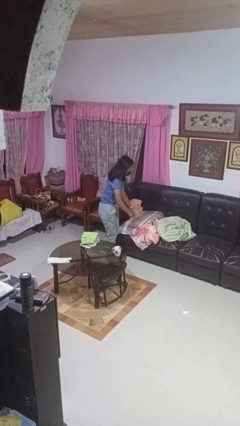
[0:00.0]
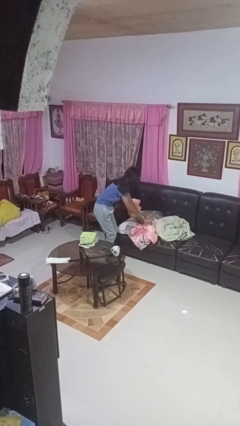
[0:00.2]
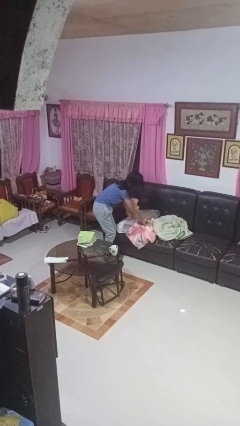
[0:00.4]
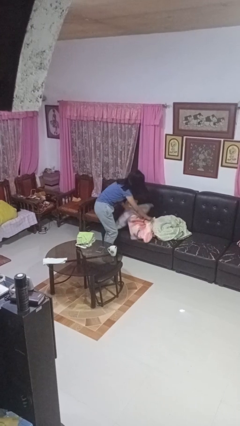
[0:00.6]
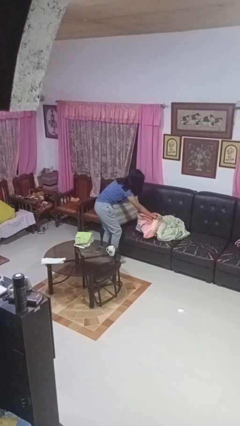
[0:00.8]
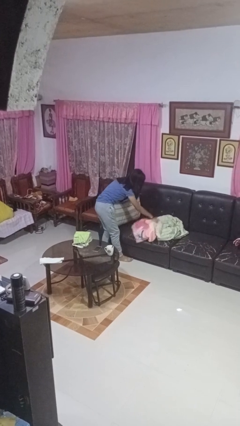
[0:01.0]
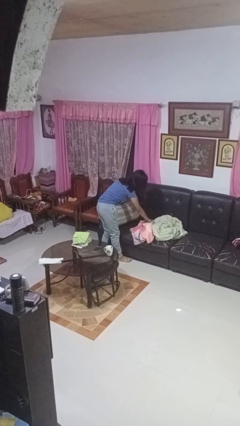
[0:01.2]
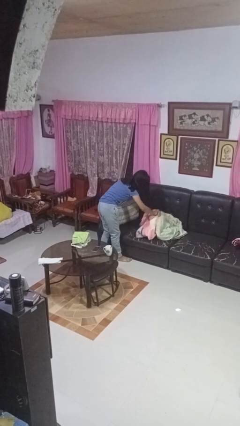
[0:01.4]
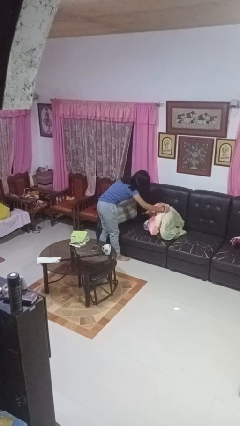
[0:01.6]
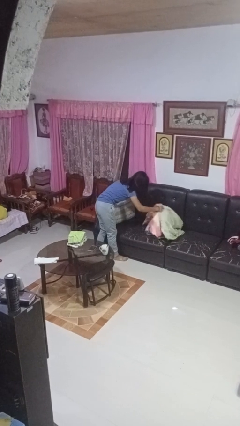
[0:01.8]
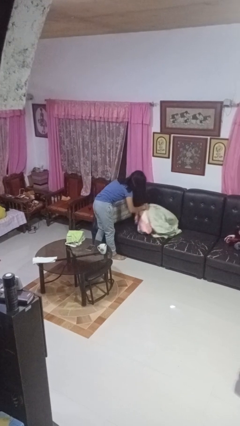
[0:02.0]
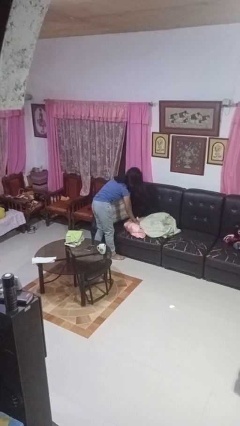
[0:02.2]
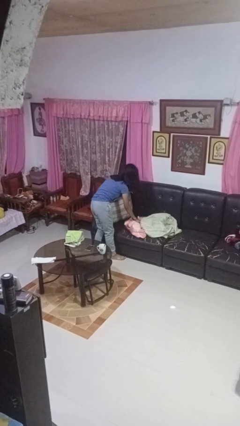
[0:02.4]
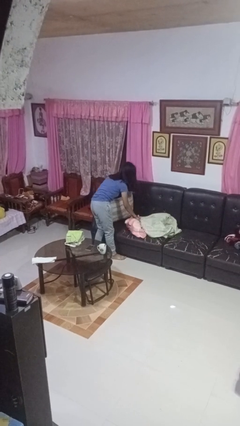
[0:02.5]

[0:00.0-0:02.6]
person searches in couch

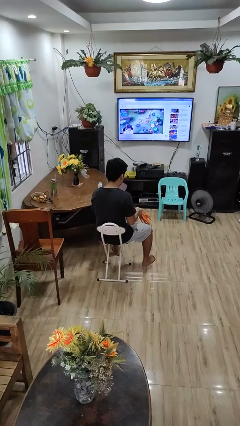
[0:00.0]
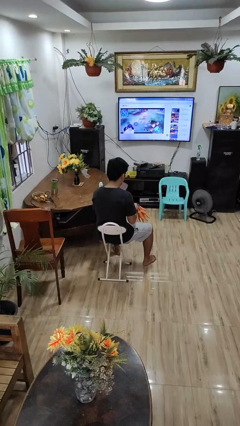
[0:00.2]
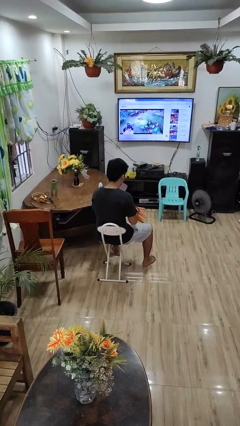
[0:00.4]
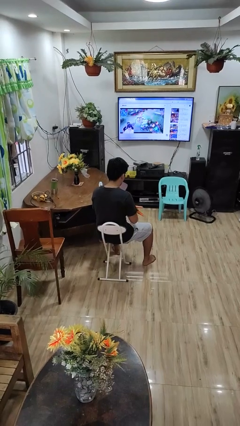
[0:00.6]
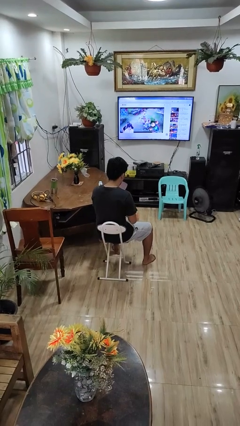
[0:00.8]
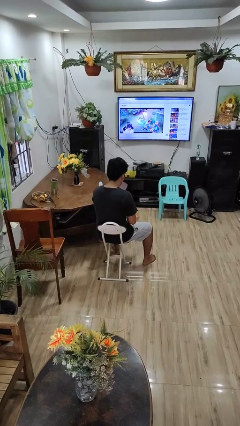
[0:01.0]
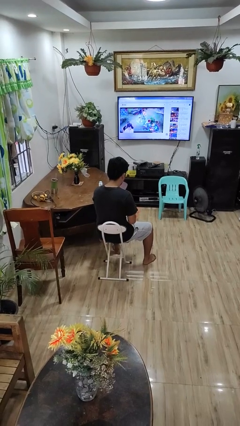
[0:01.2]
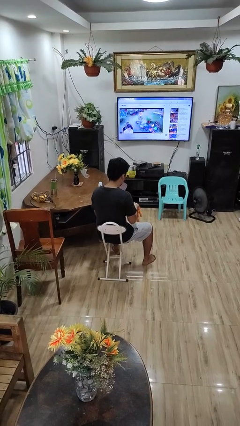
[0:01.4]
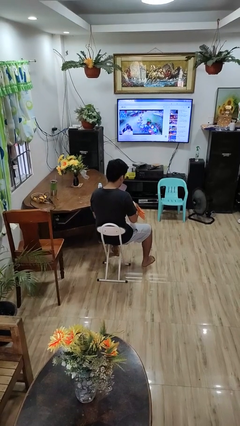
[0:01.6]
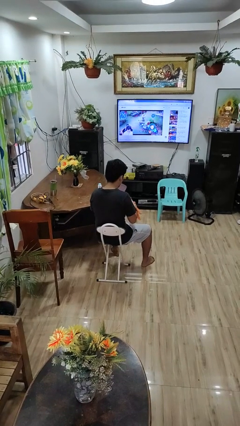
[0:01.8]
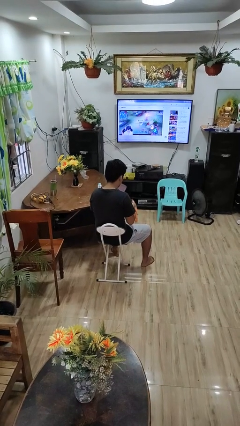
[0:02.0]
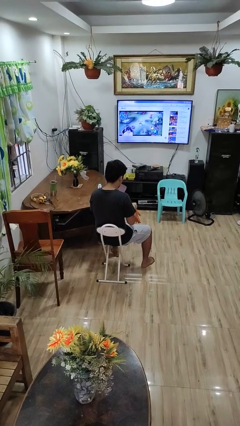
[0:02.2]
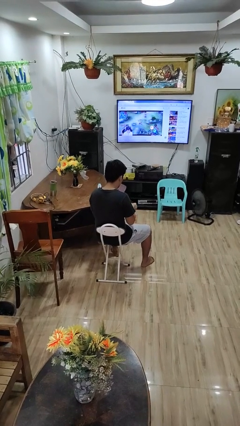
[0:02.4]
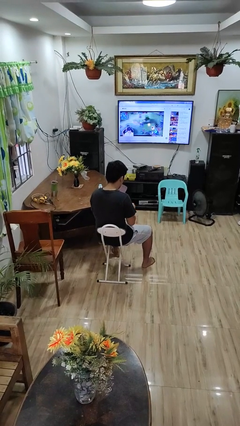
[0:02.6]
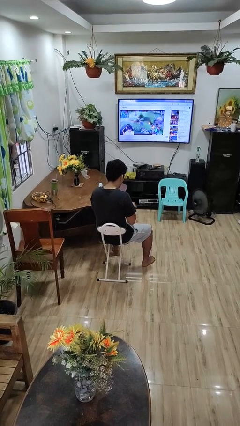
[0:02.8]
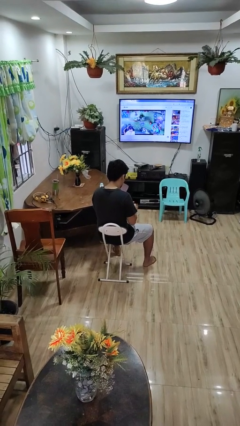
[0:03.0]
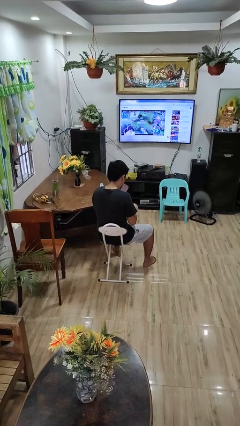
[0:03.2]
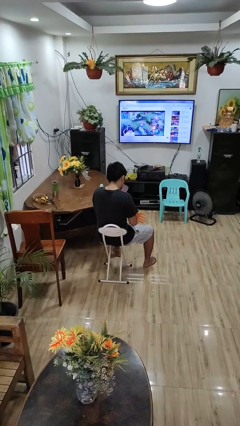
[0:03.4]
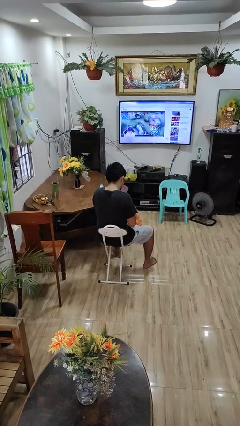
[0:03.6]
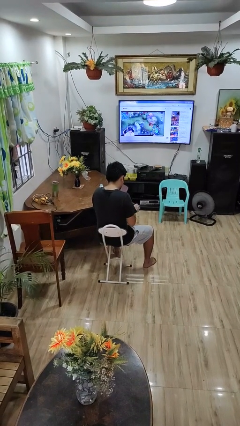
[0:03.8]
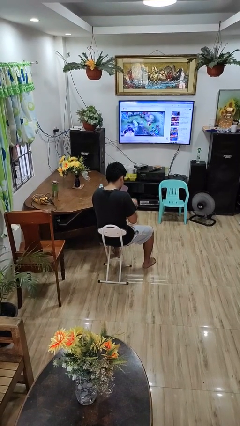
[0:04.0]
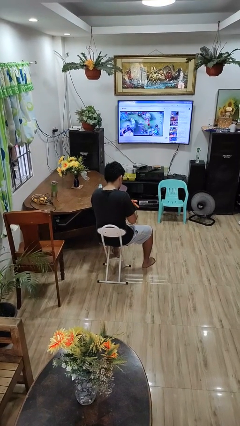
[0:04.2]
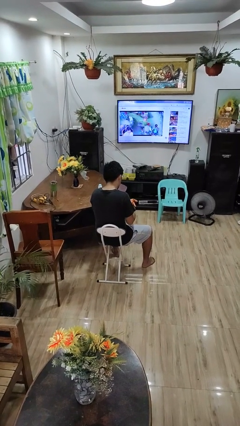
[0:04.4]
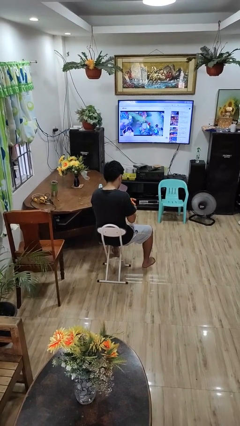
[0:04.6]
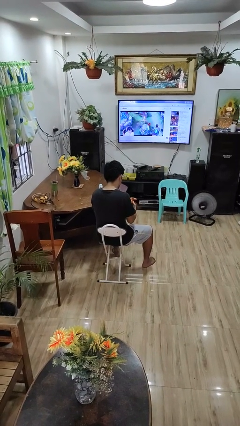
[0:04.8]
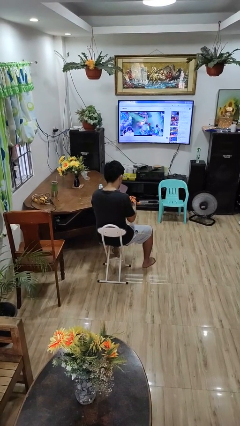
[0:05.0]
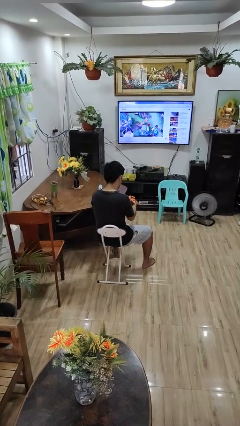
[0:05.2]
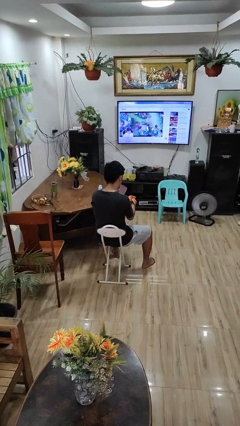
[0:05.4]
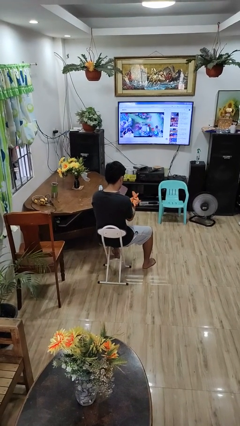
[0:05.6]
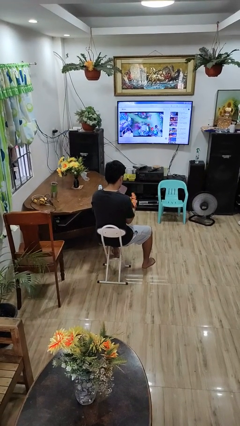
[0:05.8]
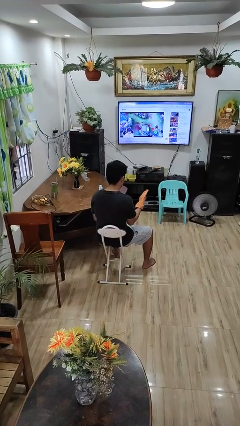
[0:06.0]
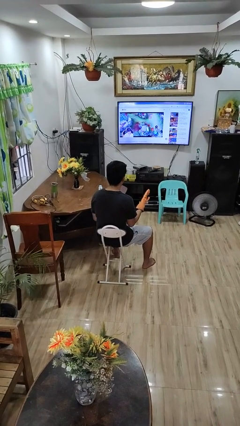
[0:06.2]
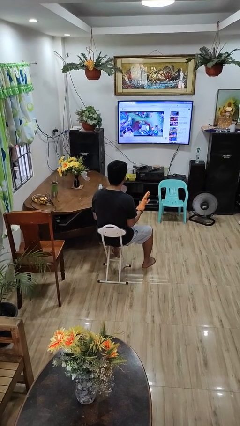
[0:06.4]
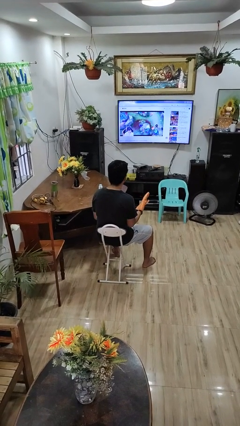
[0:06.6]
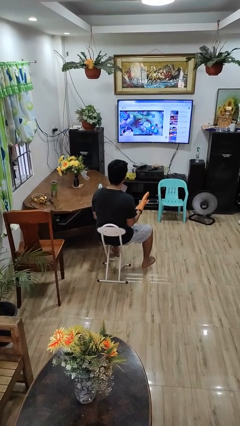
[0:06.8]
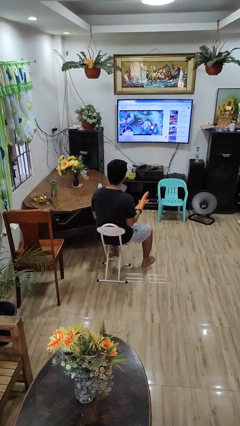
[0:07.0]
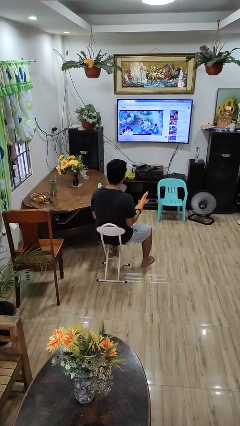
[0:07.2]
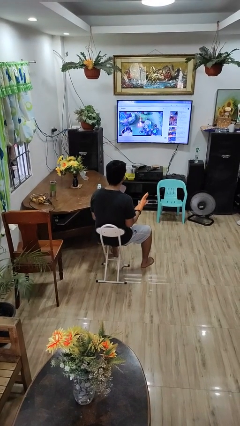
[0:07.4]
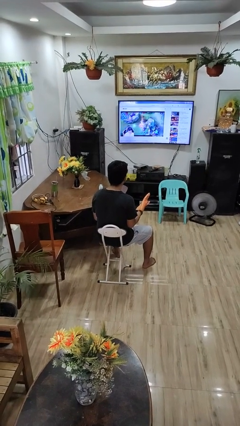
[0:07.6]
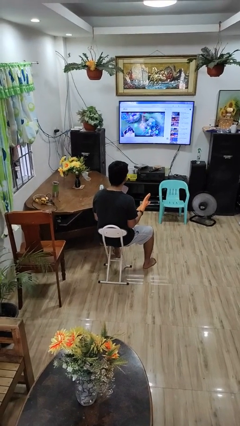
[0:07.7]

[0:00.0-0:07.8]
person puts on gloves

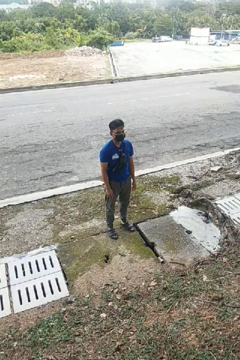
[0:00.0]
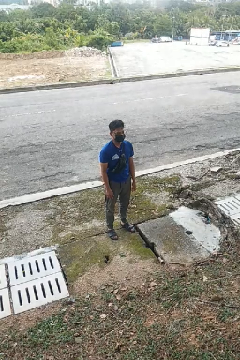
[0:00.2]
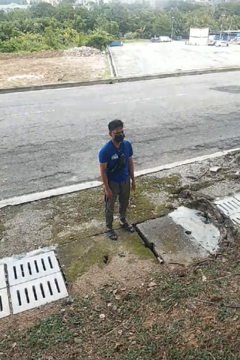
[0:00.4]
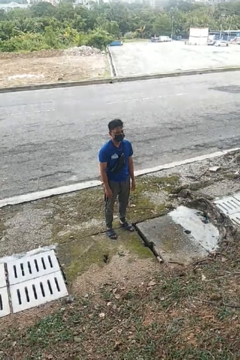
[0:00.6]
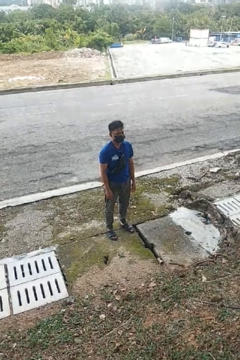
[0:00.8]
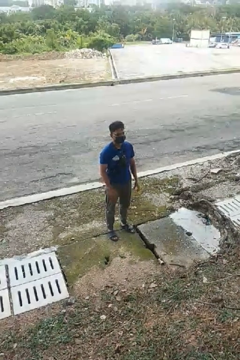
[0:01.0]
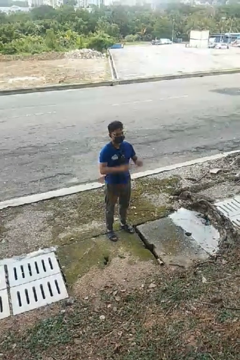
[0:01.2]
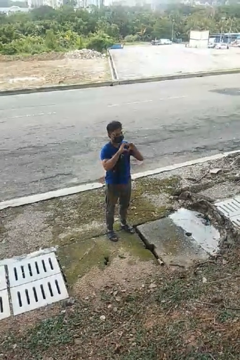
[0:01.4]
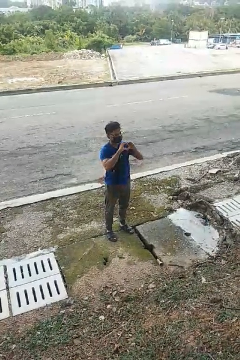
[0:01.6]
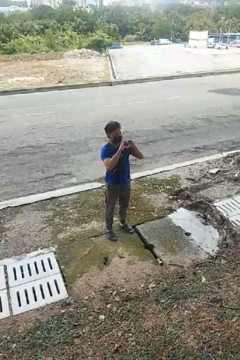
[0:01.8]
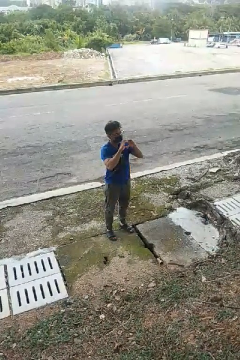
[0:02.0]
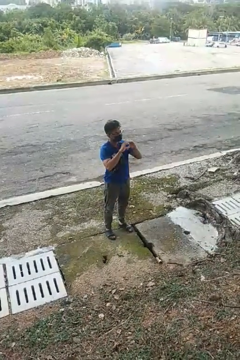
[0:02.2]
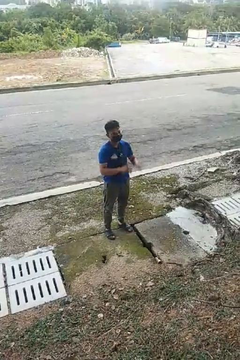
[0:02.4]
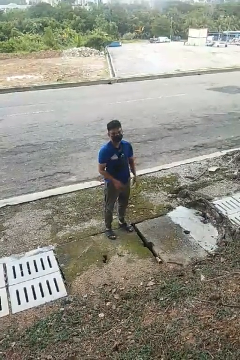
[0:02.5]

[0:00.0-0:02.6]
person gestures heart

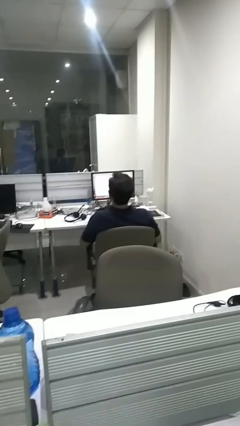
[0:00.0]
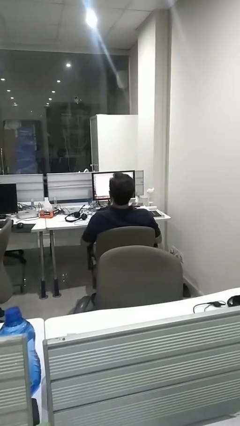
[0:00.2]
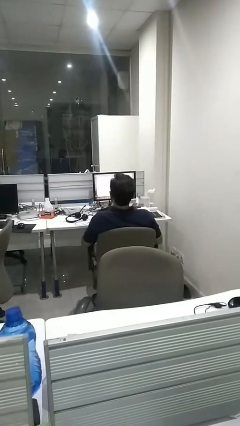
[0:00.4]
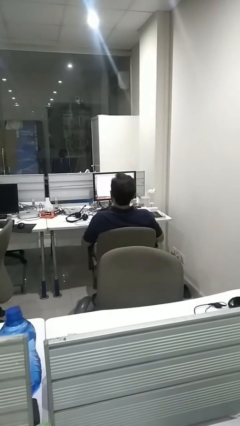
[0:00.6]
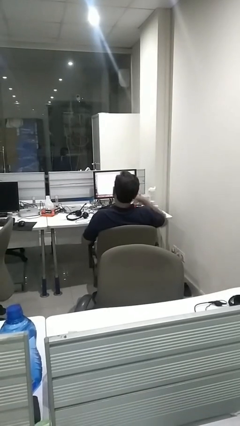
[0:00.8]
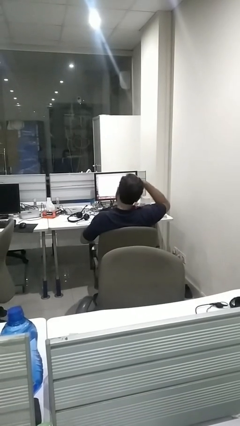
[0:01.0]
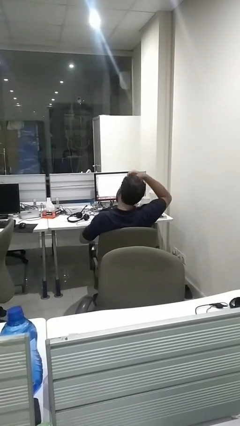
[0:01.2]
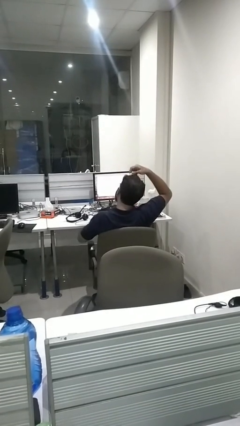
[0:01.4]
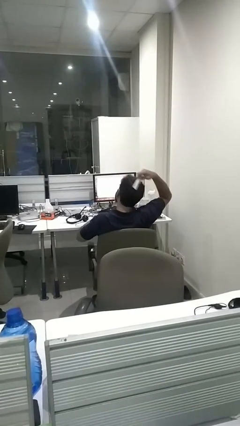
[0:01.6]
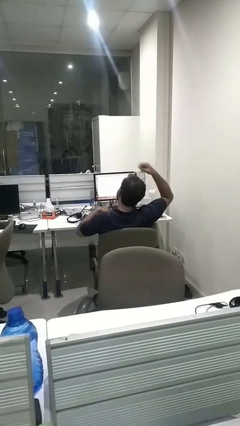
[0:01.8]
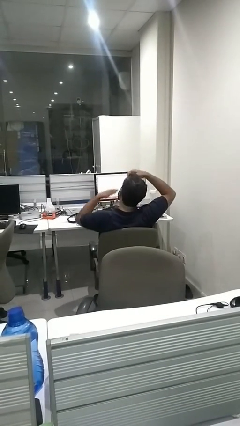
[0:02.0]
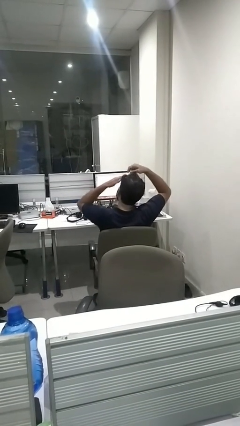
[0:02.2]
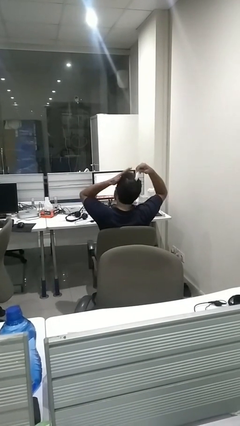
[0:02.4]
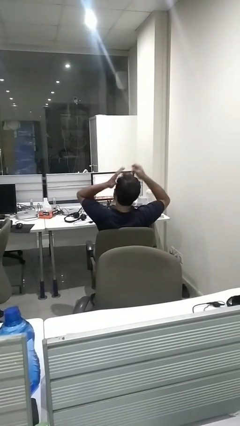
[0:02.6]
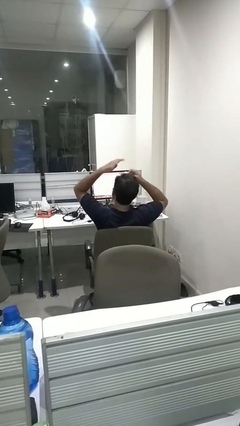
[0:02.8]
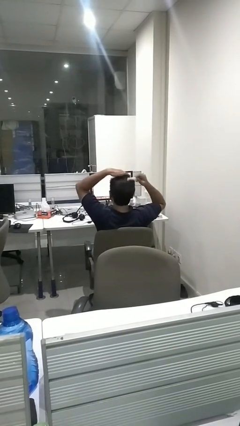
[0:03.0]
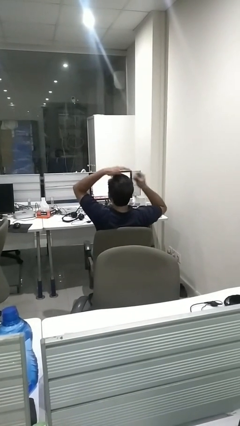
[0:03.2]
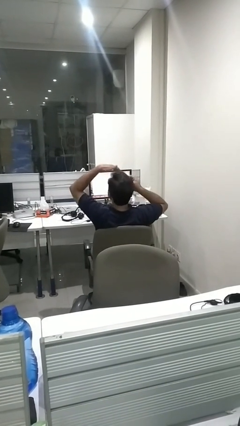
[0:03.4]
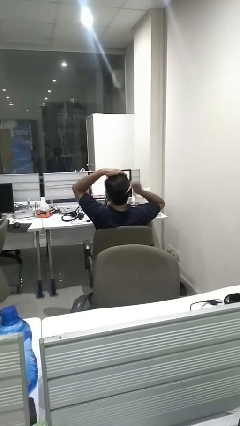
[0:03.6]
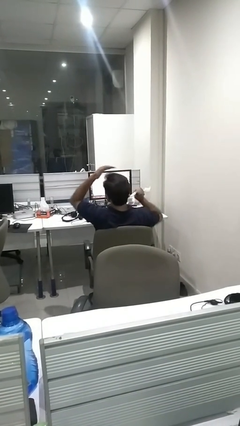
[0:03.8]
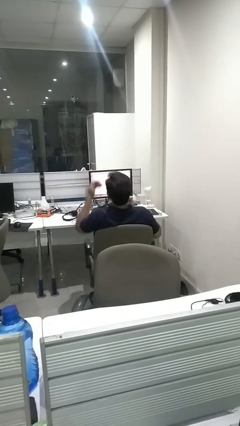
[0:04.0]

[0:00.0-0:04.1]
person brushes hair

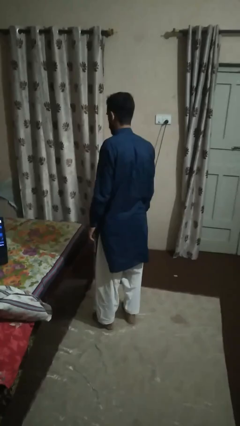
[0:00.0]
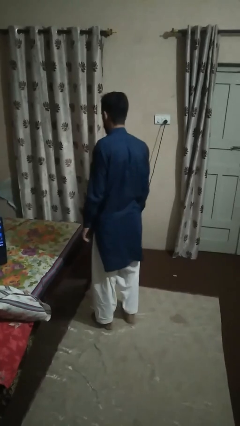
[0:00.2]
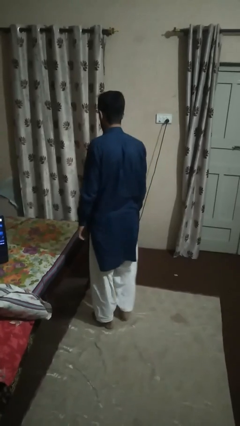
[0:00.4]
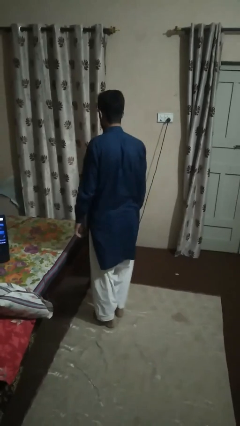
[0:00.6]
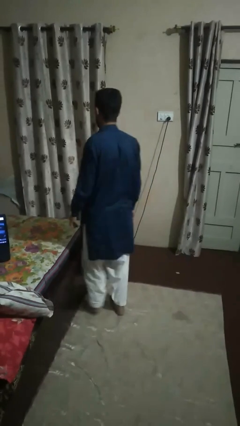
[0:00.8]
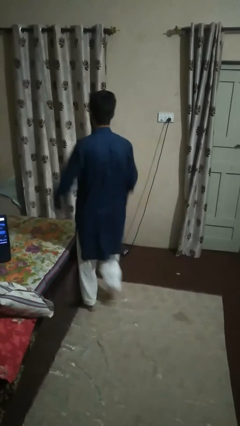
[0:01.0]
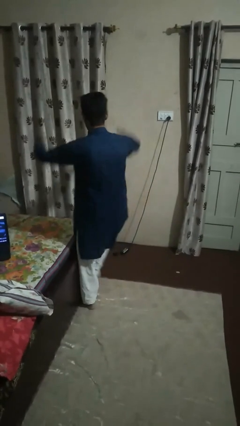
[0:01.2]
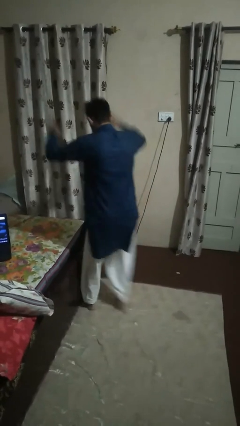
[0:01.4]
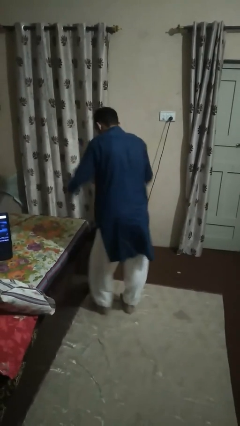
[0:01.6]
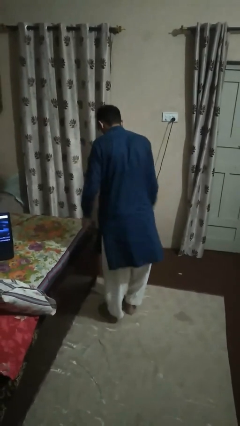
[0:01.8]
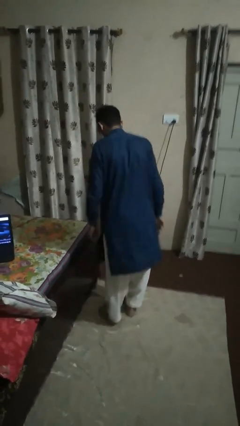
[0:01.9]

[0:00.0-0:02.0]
person stubs toe
